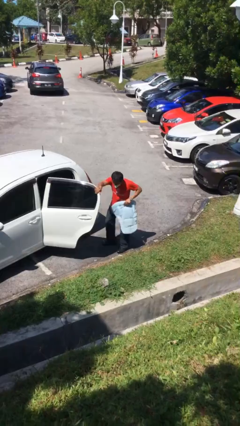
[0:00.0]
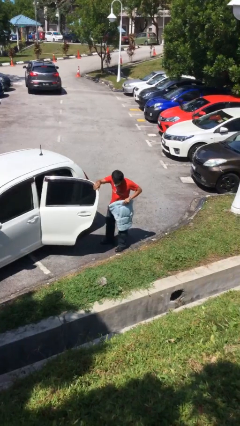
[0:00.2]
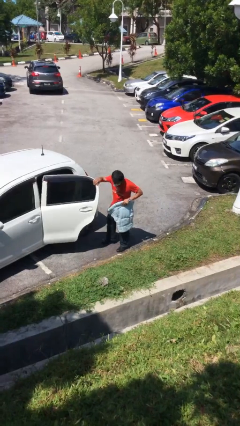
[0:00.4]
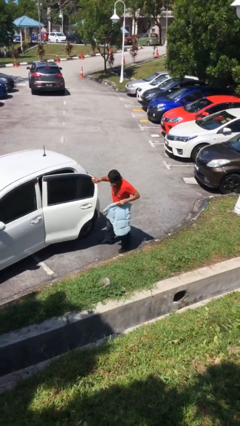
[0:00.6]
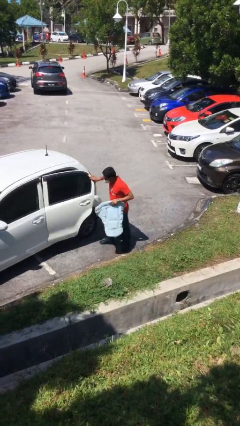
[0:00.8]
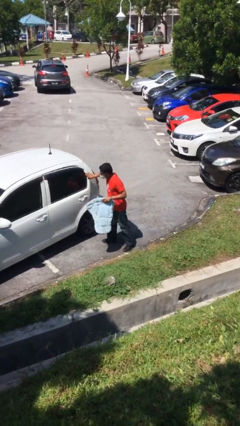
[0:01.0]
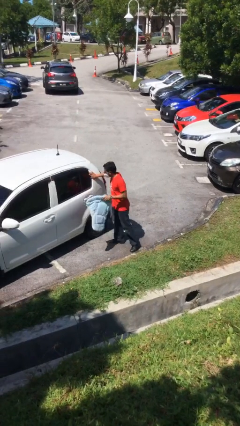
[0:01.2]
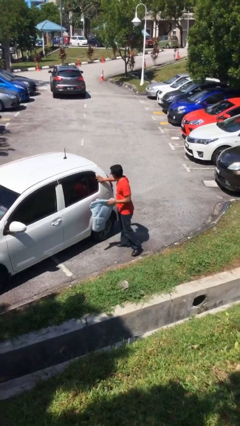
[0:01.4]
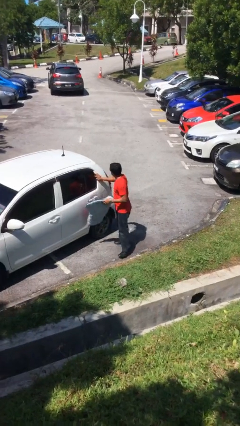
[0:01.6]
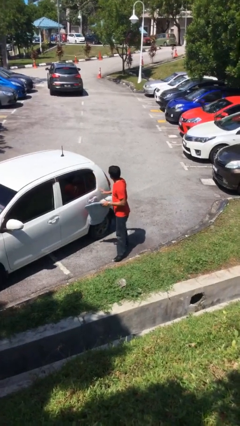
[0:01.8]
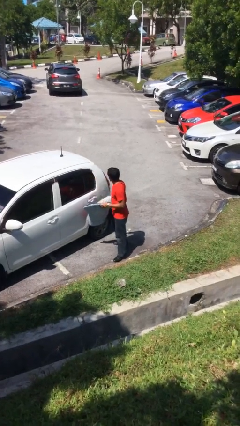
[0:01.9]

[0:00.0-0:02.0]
person closes car door

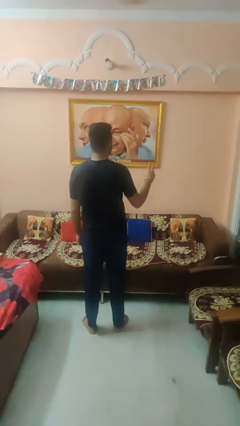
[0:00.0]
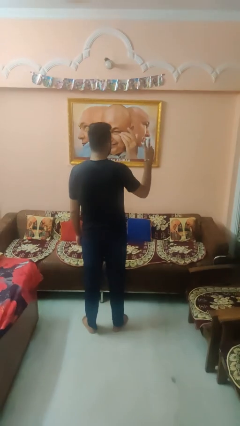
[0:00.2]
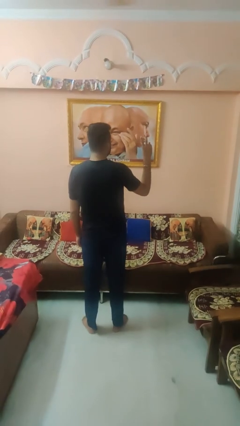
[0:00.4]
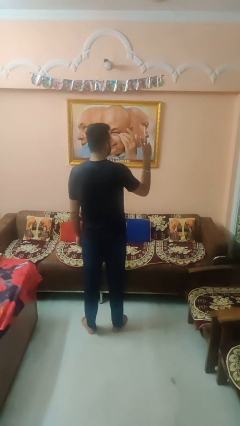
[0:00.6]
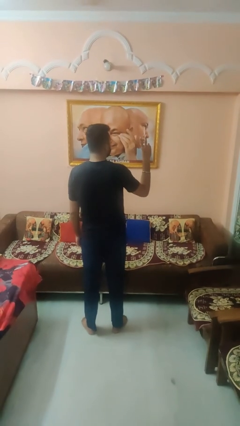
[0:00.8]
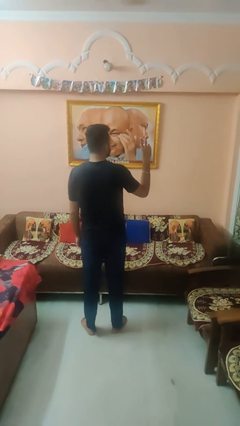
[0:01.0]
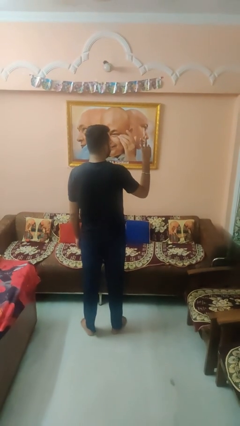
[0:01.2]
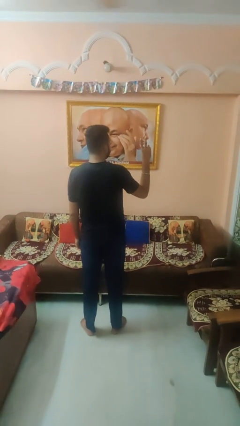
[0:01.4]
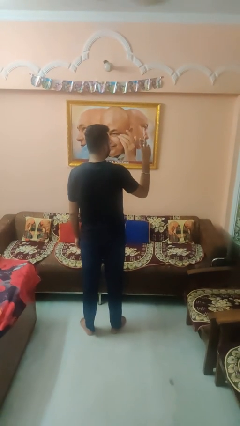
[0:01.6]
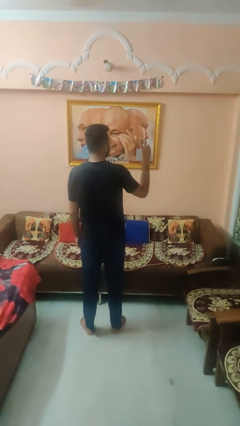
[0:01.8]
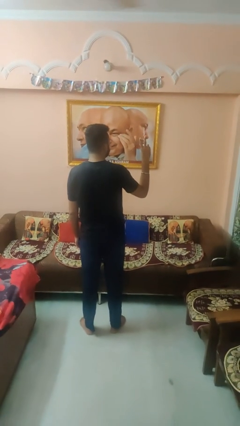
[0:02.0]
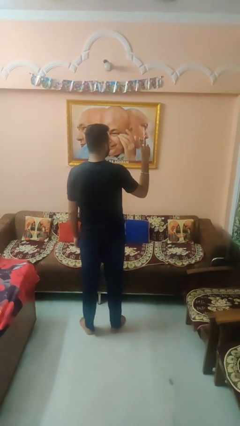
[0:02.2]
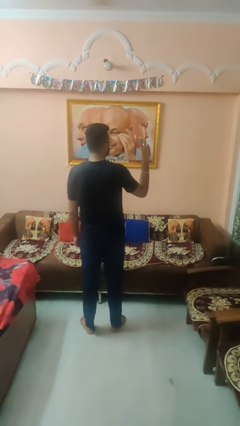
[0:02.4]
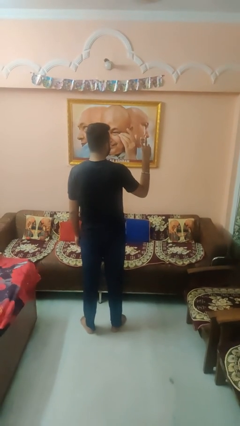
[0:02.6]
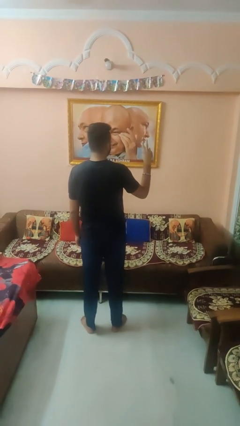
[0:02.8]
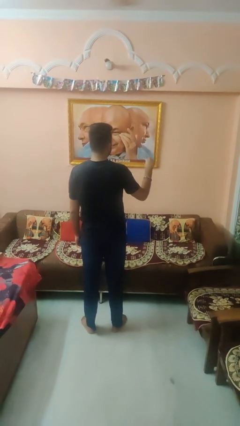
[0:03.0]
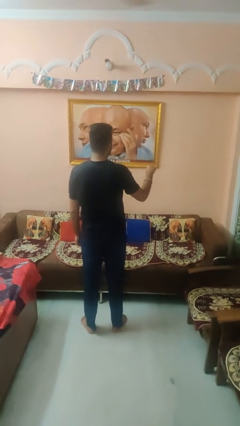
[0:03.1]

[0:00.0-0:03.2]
person gestures peace

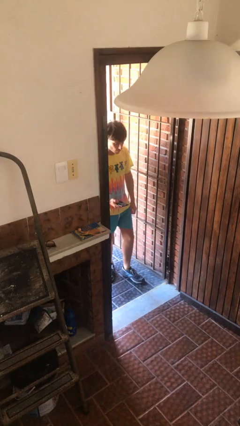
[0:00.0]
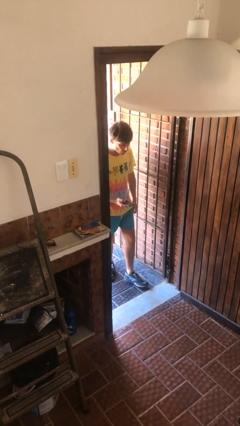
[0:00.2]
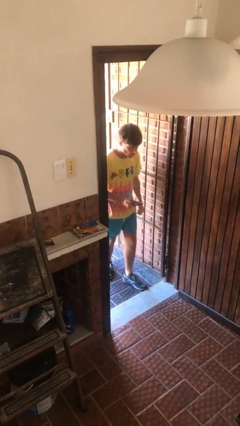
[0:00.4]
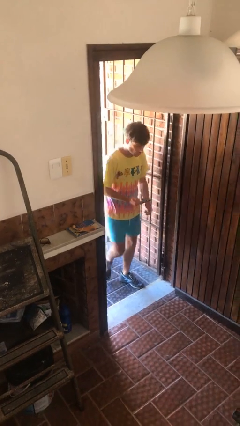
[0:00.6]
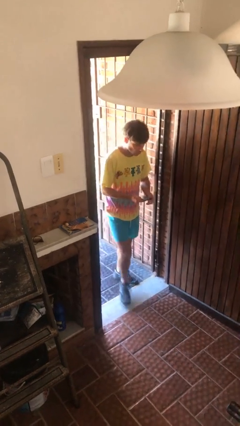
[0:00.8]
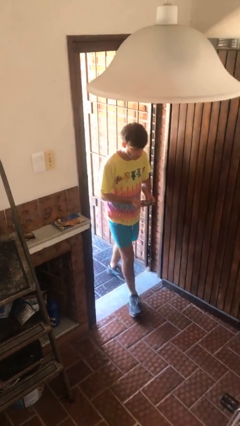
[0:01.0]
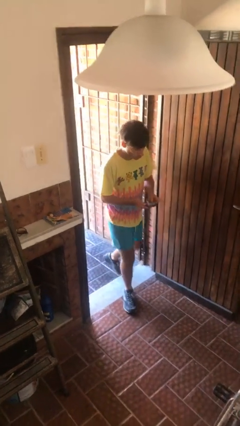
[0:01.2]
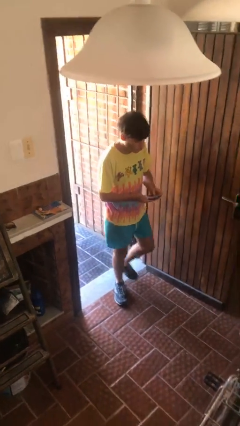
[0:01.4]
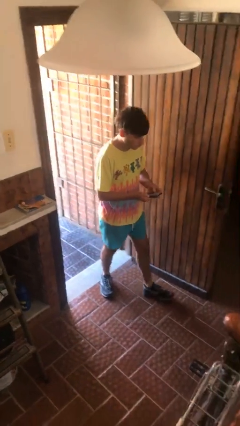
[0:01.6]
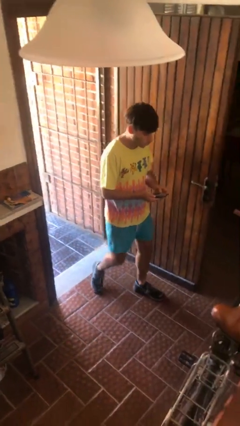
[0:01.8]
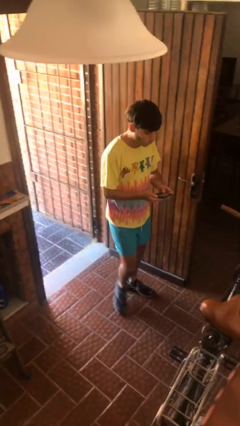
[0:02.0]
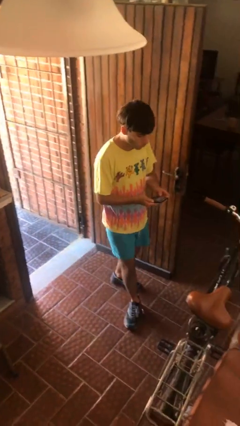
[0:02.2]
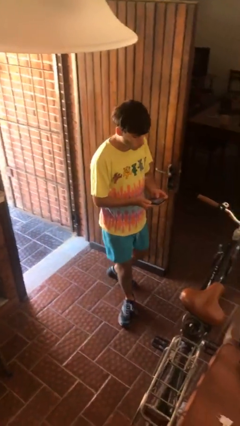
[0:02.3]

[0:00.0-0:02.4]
person enters scene through structure

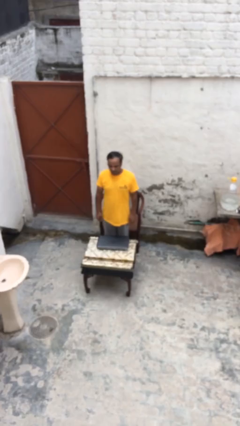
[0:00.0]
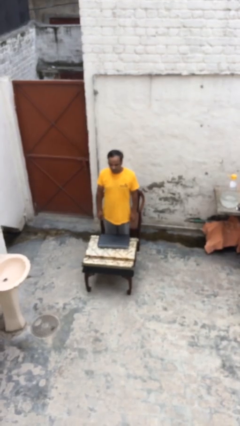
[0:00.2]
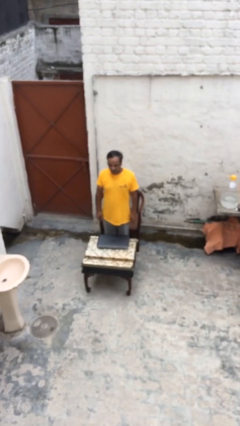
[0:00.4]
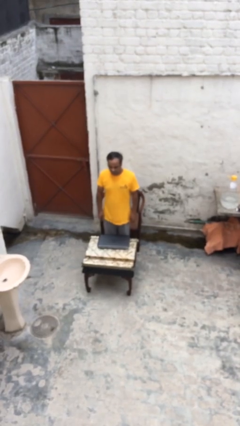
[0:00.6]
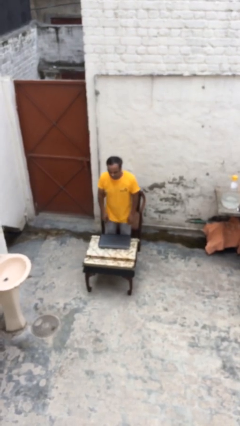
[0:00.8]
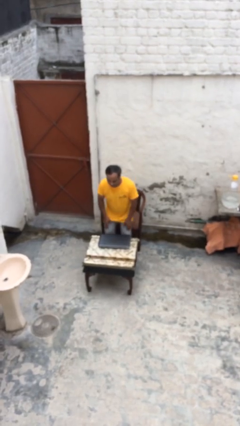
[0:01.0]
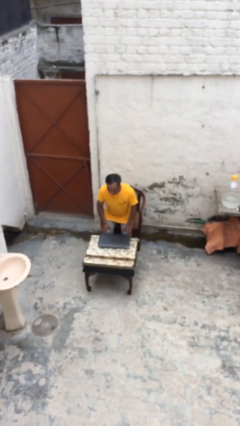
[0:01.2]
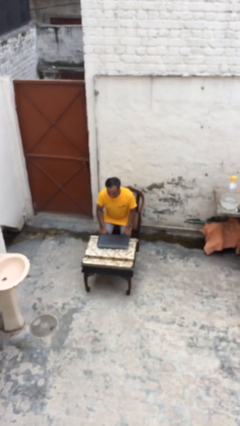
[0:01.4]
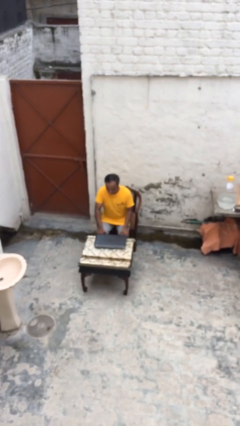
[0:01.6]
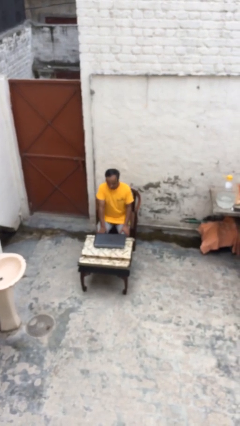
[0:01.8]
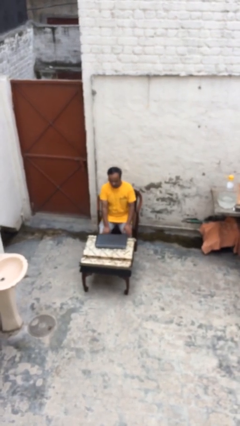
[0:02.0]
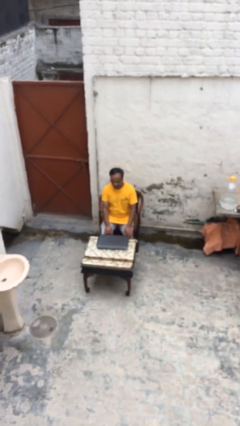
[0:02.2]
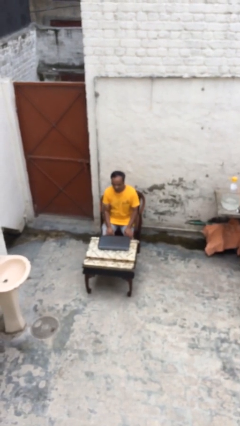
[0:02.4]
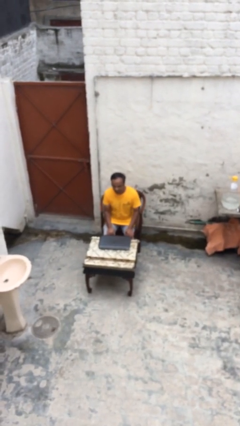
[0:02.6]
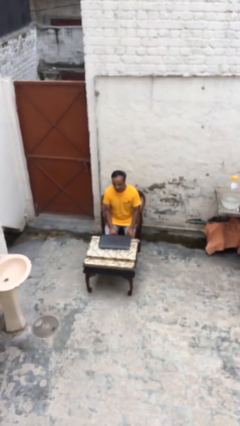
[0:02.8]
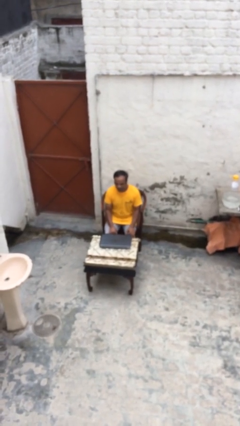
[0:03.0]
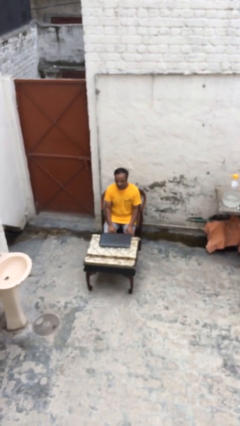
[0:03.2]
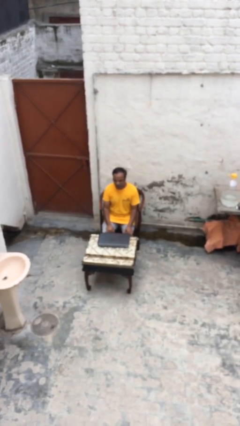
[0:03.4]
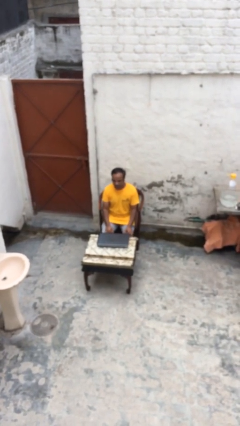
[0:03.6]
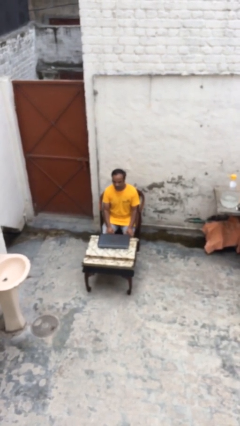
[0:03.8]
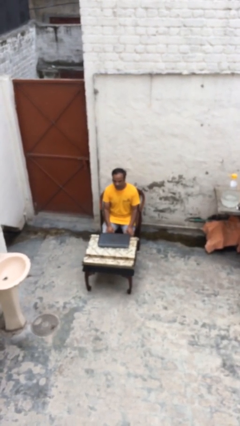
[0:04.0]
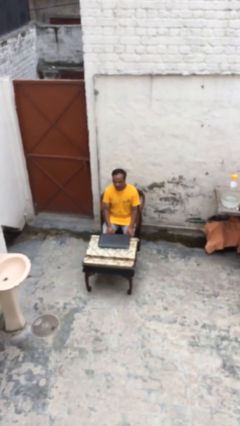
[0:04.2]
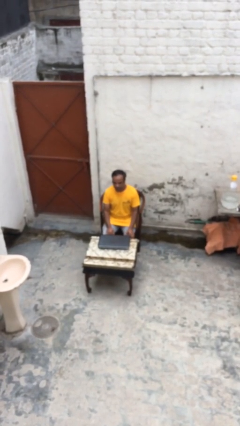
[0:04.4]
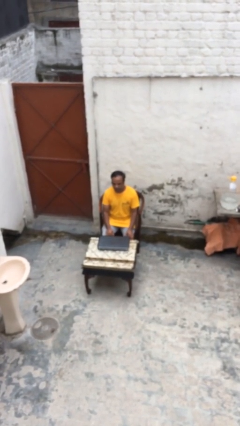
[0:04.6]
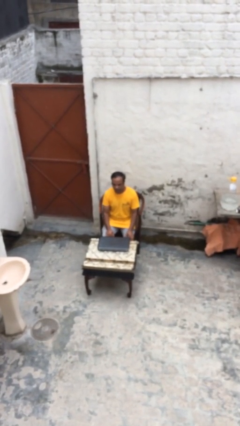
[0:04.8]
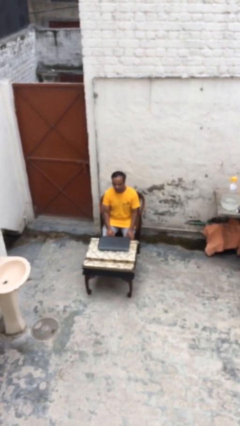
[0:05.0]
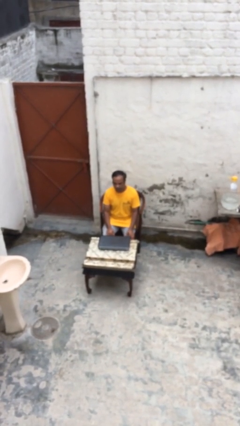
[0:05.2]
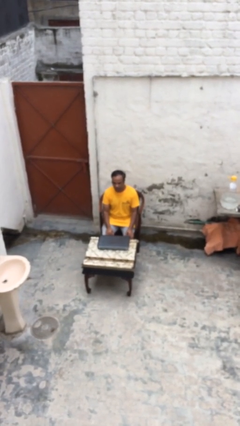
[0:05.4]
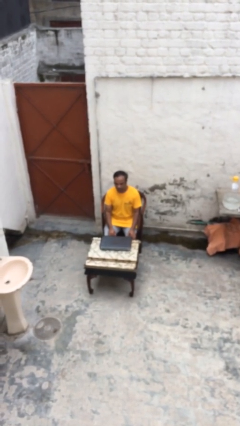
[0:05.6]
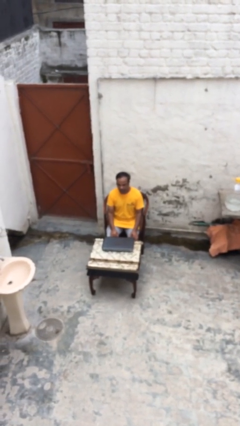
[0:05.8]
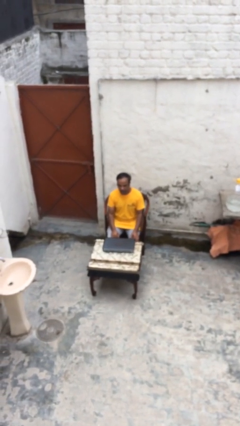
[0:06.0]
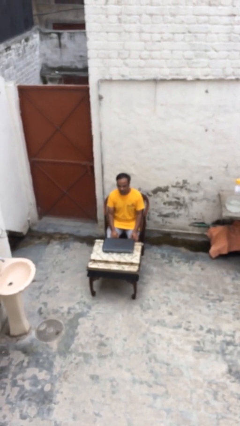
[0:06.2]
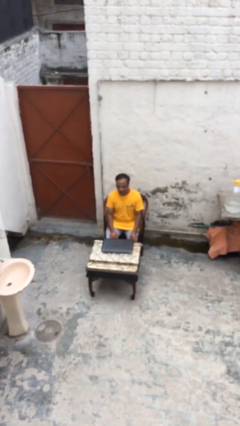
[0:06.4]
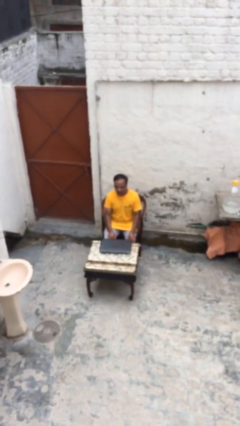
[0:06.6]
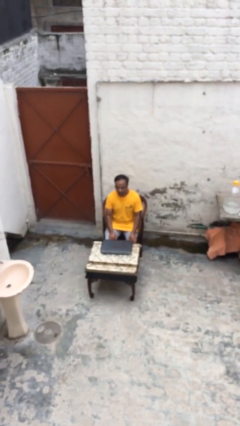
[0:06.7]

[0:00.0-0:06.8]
person sits down

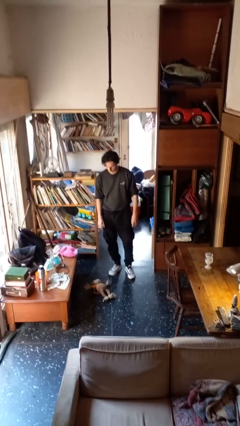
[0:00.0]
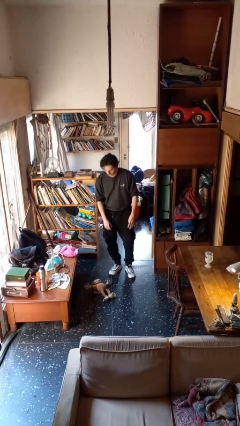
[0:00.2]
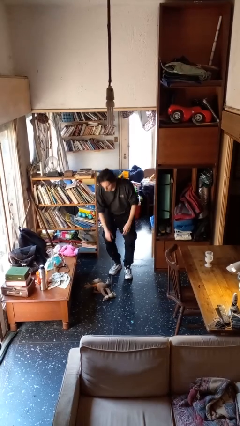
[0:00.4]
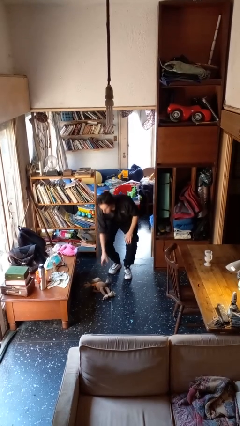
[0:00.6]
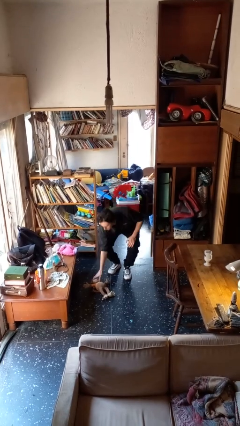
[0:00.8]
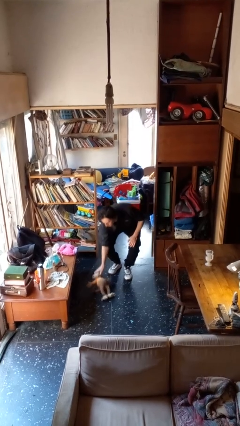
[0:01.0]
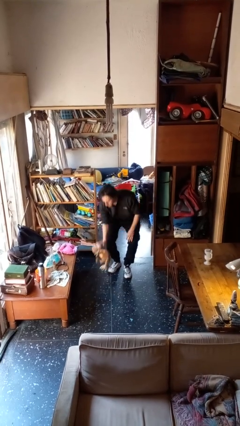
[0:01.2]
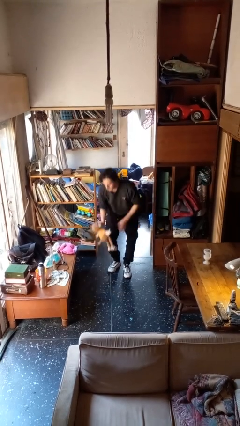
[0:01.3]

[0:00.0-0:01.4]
person picks up object from floor

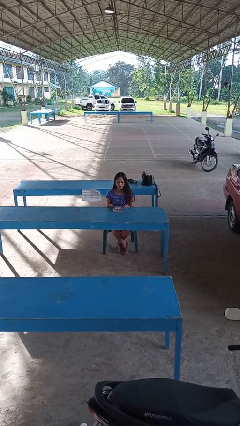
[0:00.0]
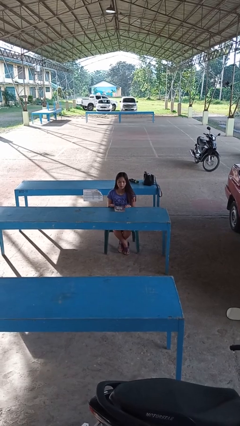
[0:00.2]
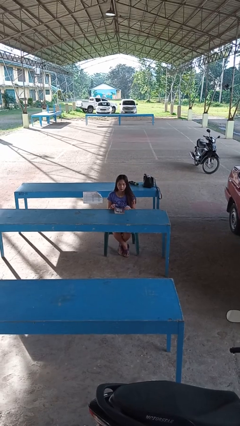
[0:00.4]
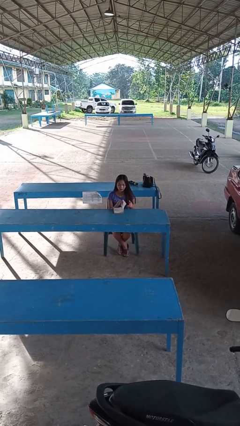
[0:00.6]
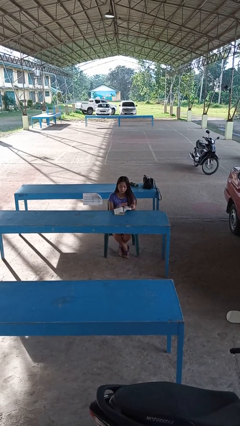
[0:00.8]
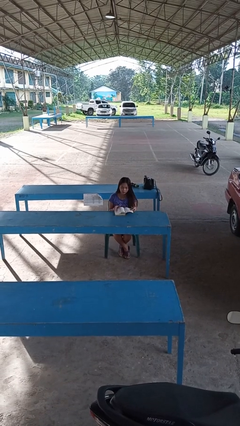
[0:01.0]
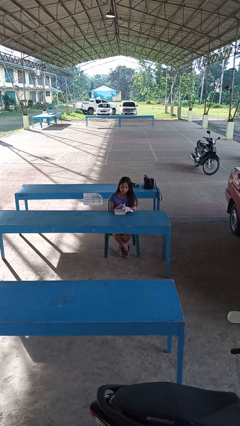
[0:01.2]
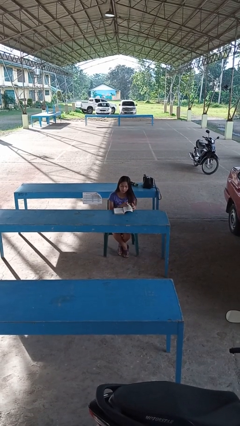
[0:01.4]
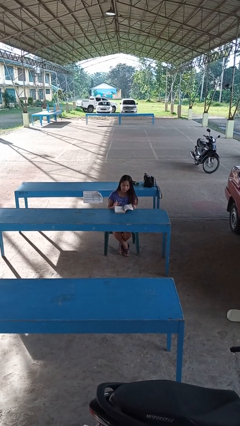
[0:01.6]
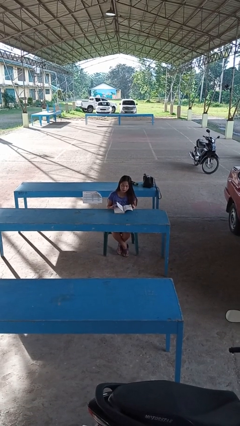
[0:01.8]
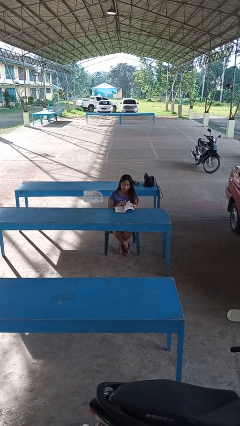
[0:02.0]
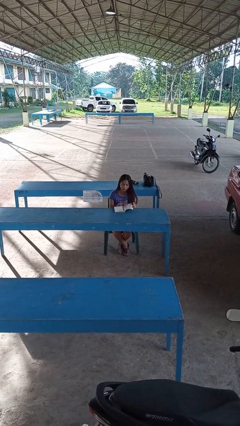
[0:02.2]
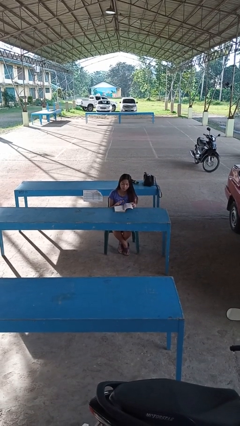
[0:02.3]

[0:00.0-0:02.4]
person reads book
